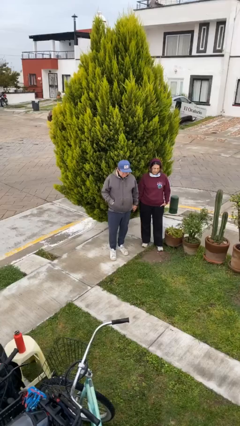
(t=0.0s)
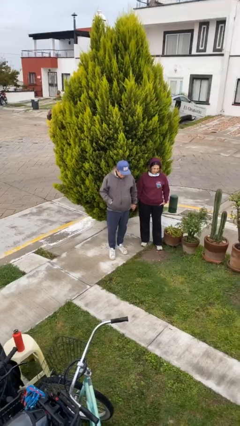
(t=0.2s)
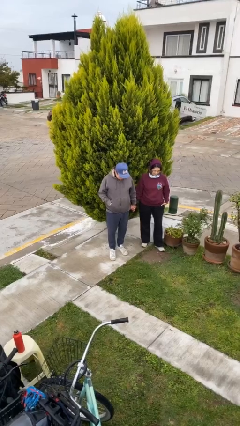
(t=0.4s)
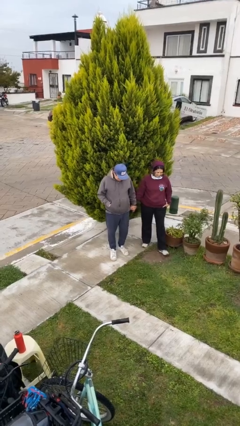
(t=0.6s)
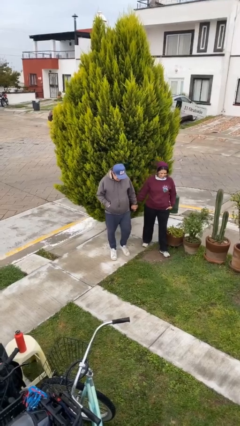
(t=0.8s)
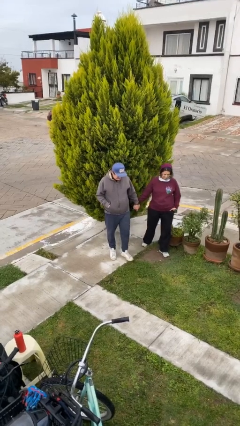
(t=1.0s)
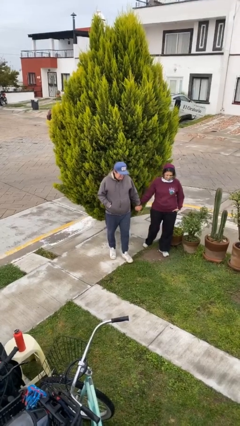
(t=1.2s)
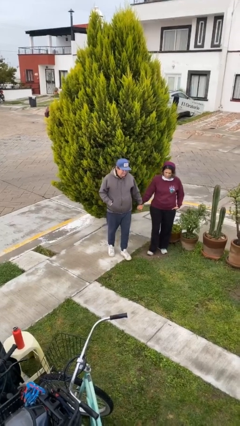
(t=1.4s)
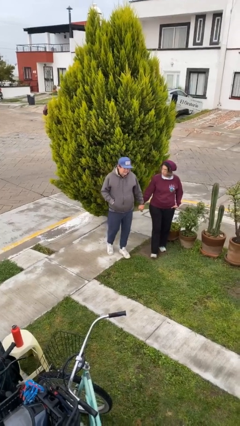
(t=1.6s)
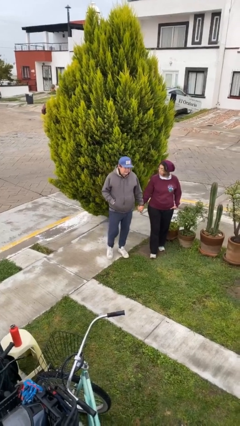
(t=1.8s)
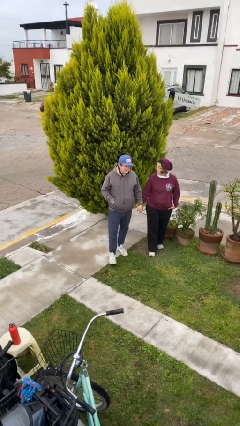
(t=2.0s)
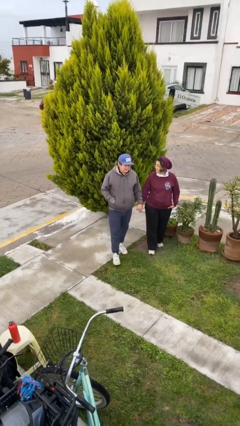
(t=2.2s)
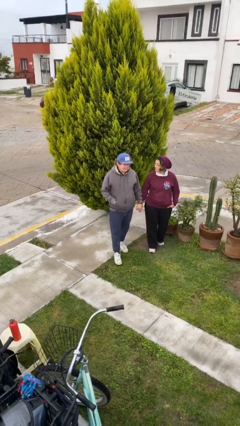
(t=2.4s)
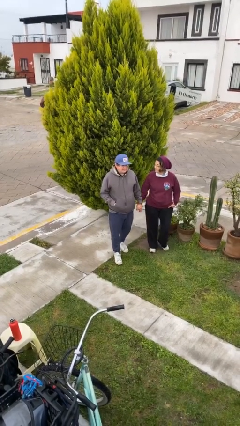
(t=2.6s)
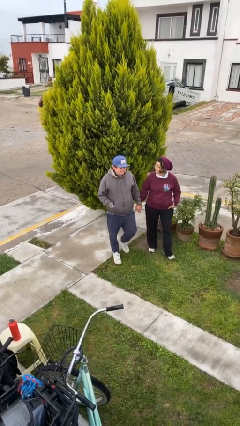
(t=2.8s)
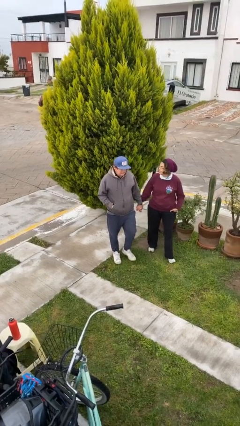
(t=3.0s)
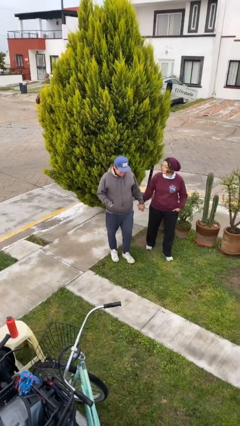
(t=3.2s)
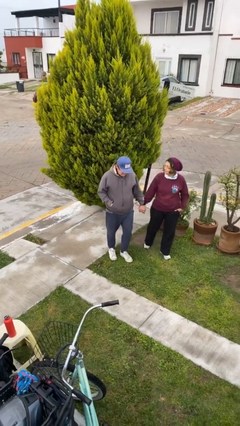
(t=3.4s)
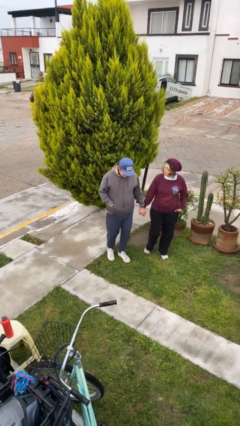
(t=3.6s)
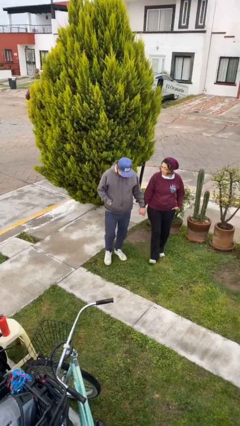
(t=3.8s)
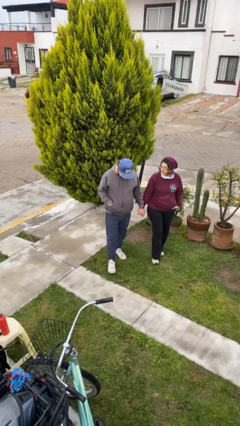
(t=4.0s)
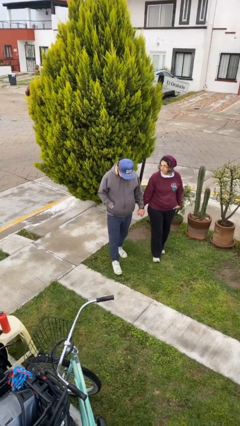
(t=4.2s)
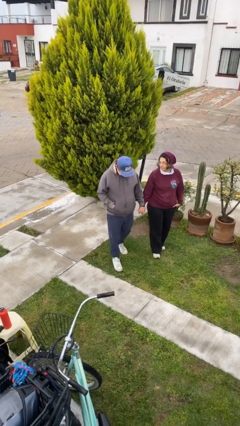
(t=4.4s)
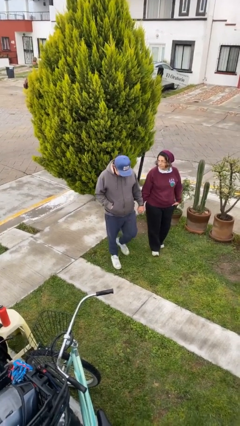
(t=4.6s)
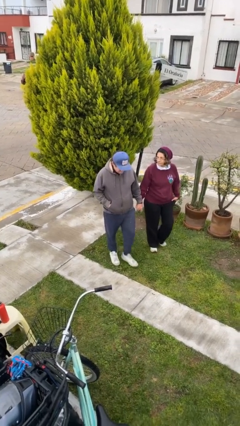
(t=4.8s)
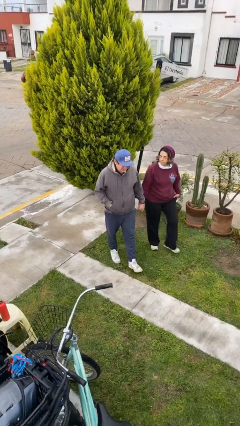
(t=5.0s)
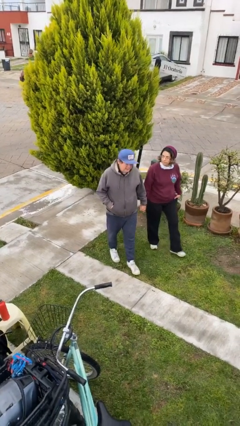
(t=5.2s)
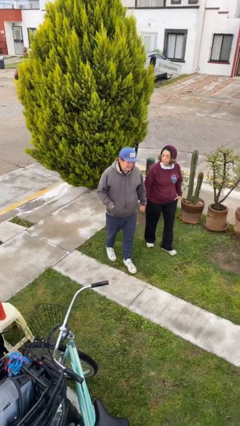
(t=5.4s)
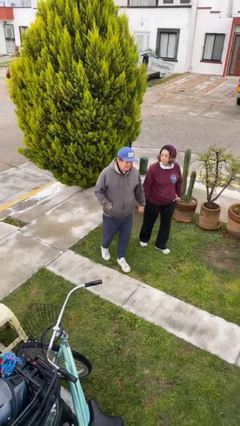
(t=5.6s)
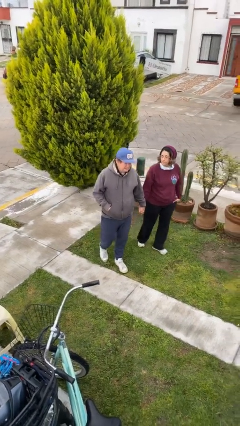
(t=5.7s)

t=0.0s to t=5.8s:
person holds hand

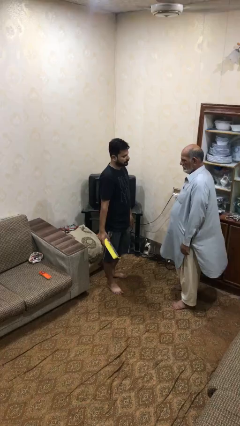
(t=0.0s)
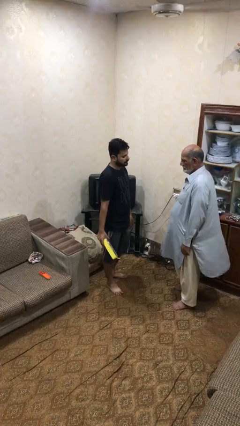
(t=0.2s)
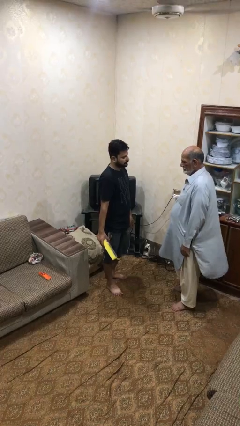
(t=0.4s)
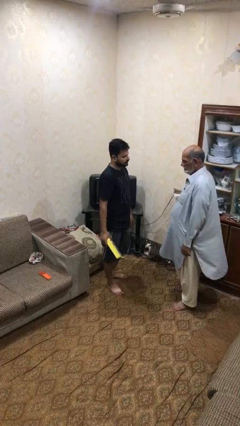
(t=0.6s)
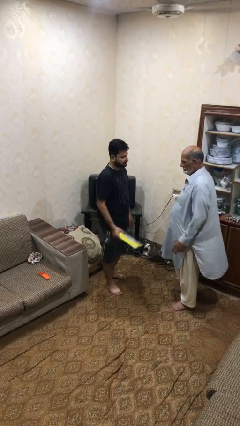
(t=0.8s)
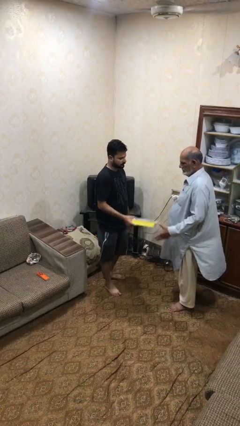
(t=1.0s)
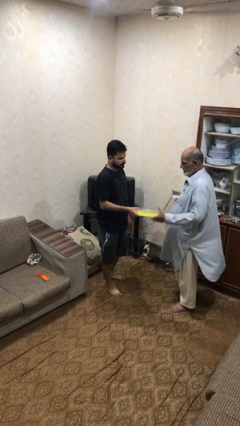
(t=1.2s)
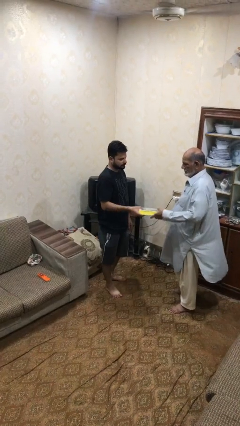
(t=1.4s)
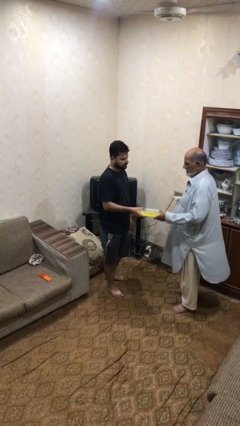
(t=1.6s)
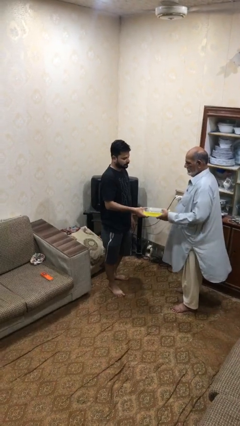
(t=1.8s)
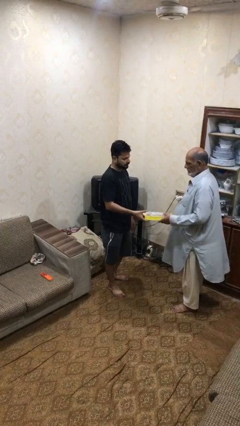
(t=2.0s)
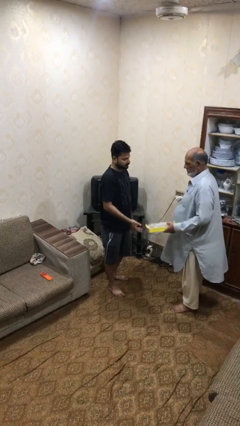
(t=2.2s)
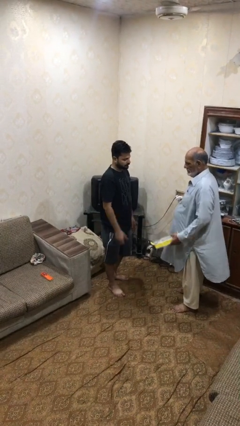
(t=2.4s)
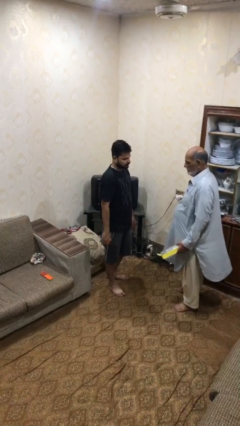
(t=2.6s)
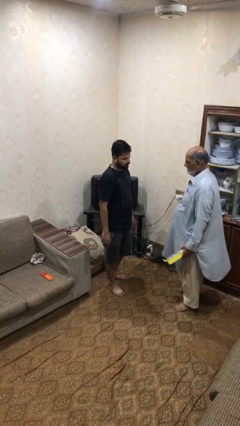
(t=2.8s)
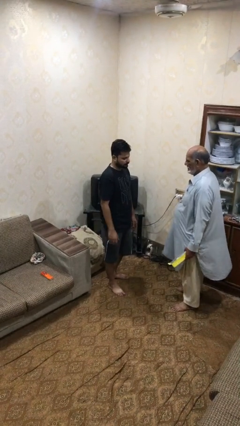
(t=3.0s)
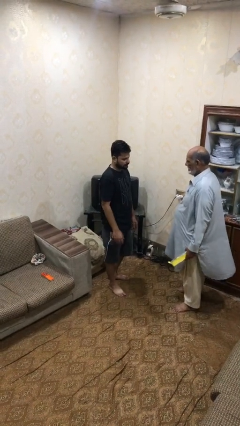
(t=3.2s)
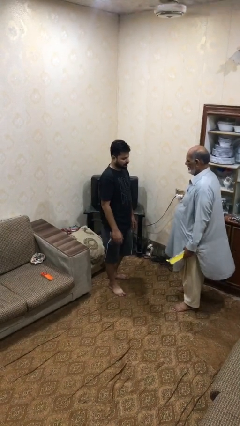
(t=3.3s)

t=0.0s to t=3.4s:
person transfers object to person

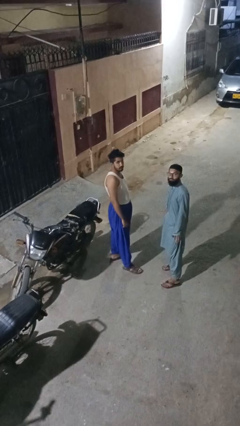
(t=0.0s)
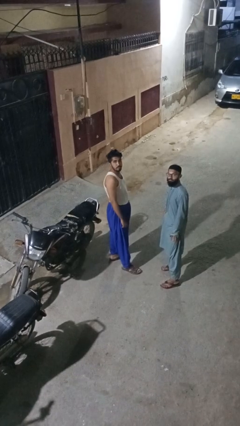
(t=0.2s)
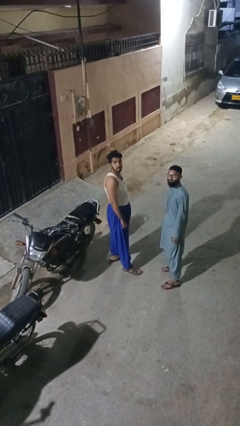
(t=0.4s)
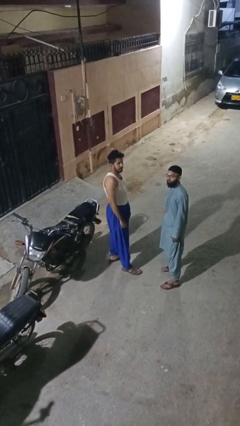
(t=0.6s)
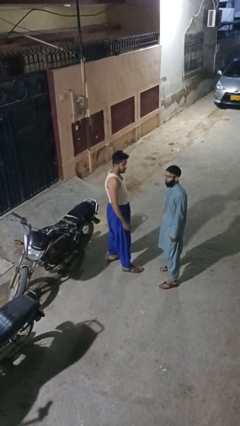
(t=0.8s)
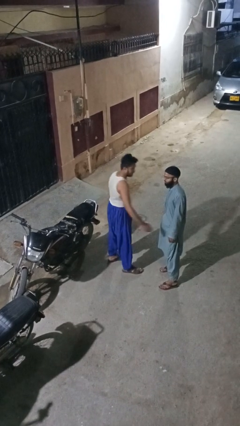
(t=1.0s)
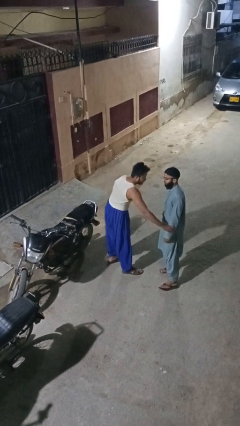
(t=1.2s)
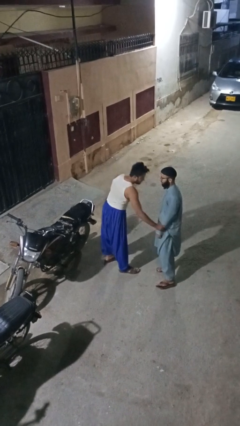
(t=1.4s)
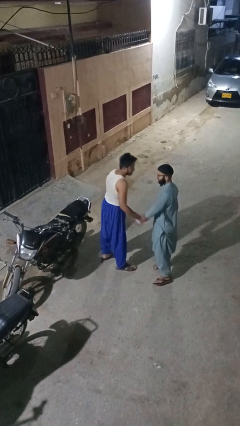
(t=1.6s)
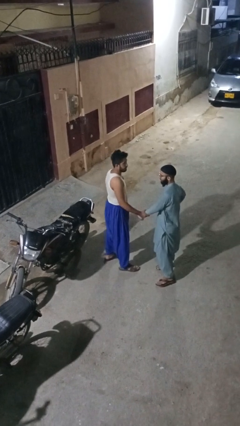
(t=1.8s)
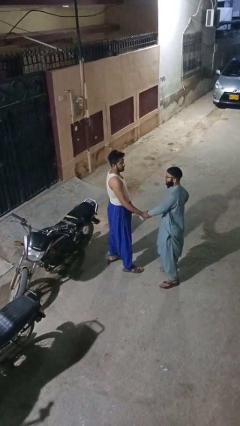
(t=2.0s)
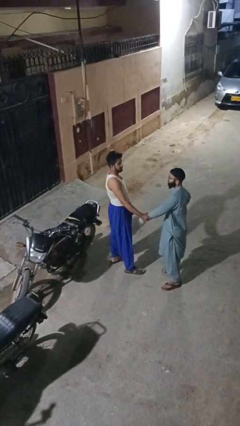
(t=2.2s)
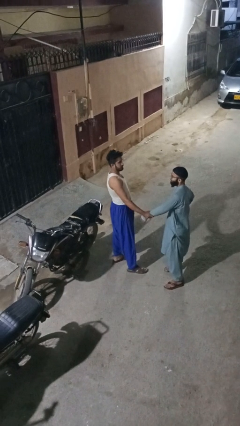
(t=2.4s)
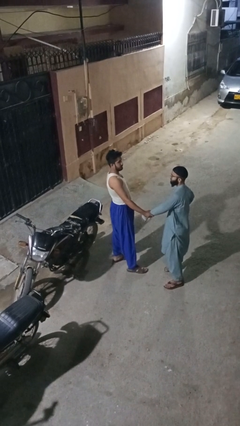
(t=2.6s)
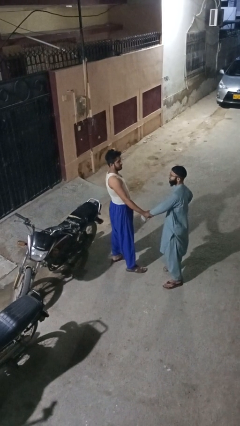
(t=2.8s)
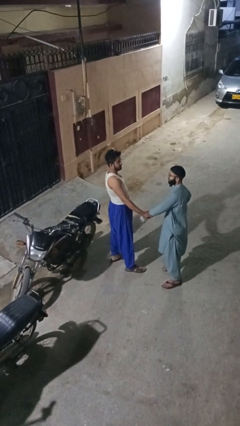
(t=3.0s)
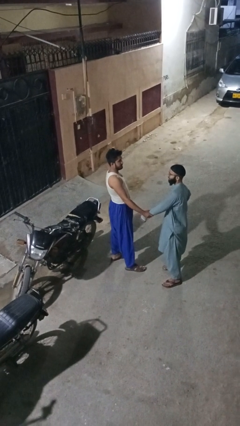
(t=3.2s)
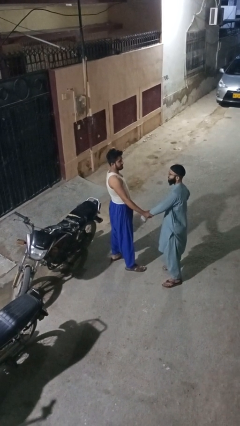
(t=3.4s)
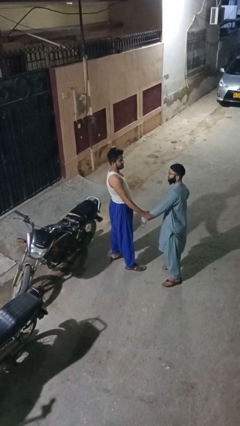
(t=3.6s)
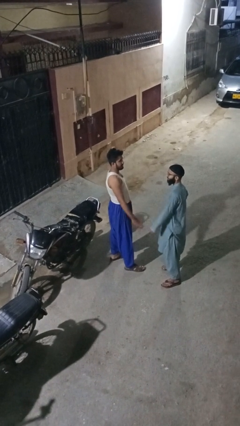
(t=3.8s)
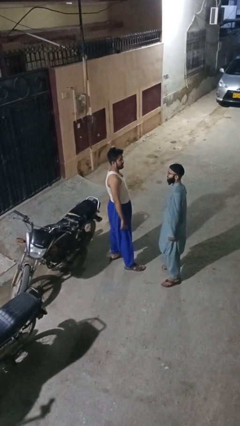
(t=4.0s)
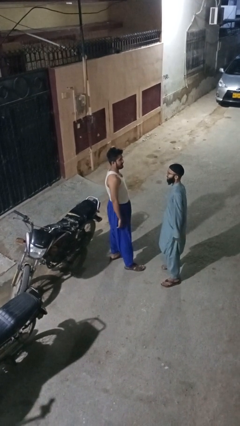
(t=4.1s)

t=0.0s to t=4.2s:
person grabs person by forearm

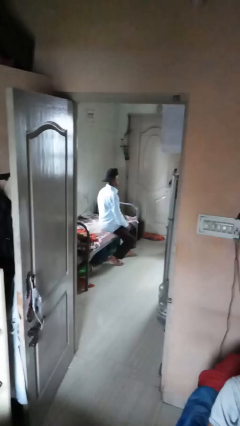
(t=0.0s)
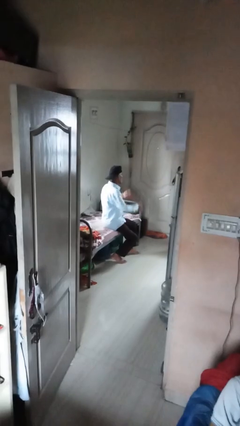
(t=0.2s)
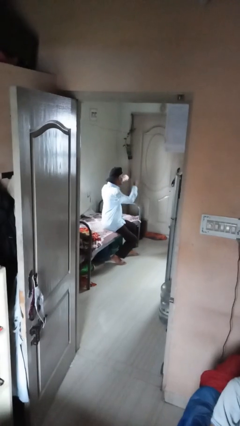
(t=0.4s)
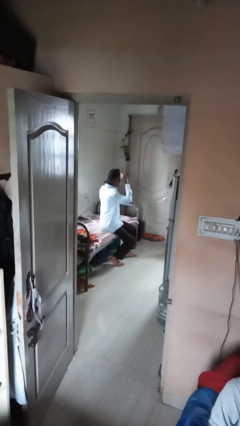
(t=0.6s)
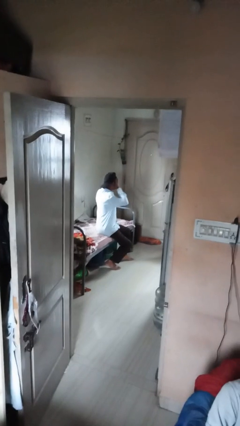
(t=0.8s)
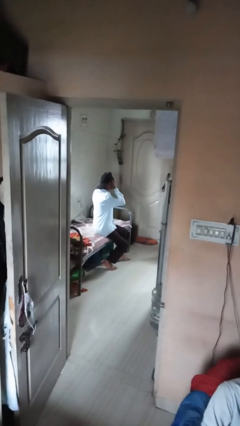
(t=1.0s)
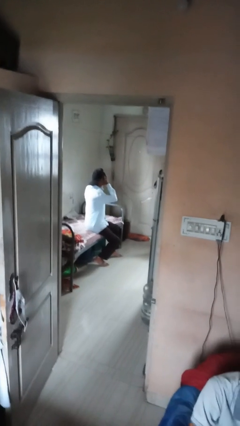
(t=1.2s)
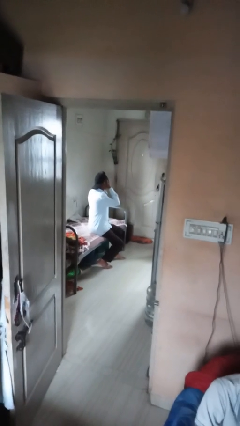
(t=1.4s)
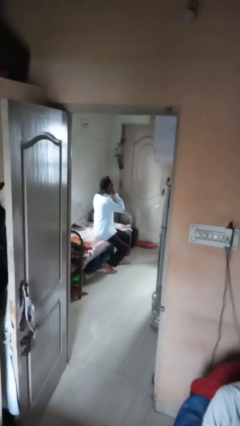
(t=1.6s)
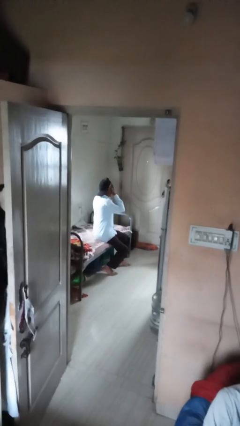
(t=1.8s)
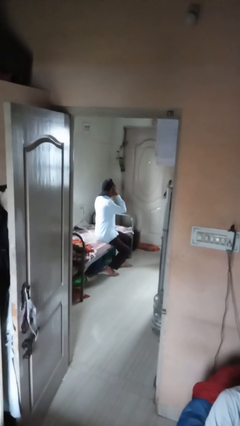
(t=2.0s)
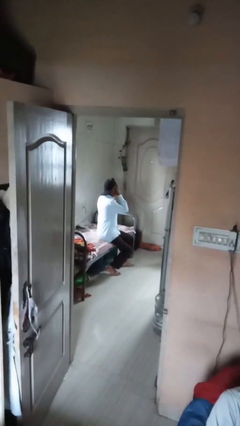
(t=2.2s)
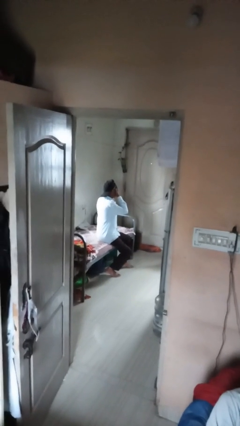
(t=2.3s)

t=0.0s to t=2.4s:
person covers face with hands

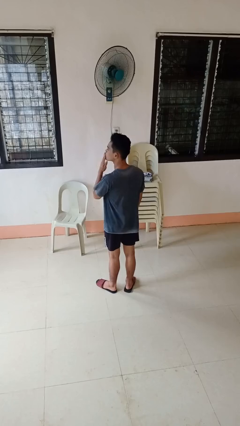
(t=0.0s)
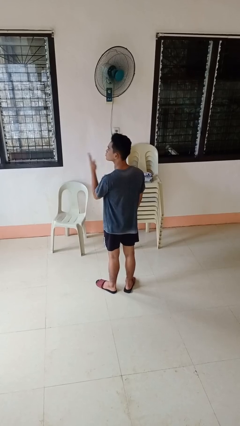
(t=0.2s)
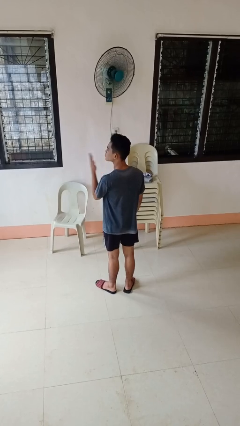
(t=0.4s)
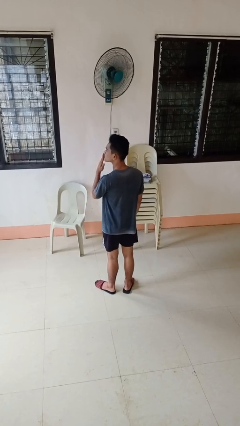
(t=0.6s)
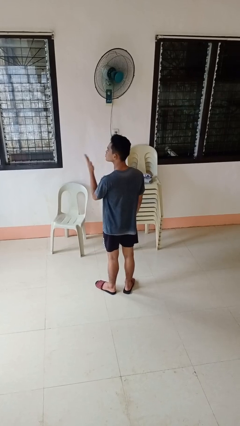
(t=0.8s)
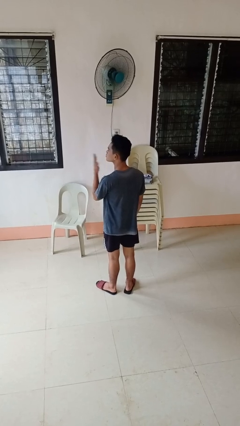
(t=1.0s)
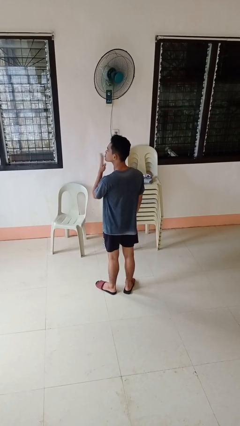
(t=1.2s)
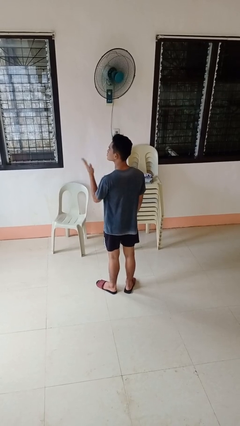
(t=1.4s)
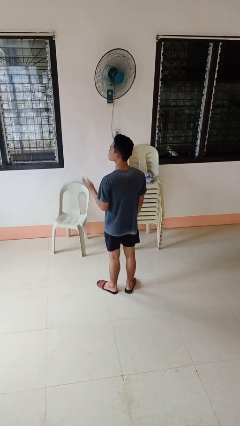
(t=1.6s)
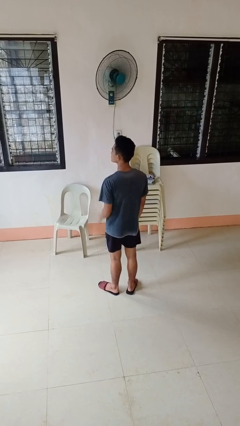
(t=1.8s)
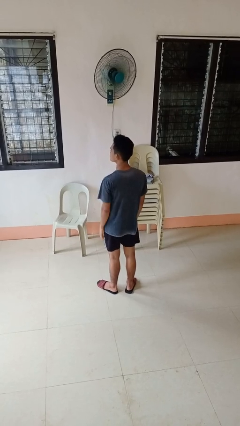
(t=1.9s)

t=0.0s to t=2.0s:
person gestures blow kiss
